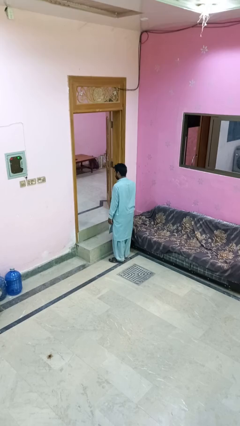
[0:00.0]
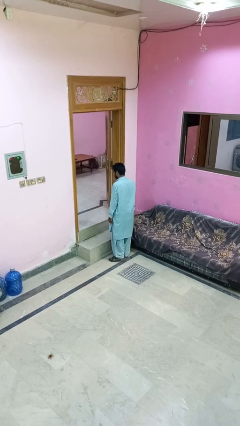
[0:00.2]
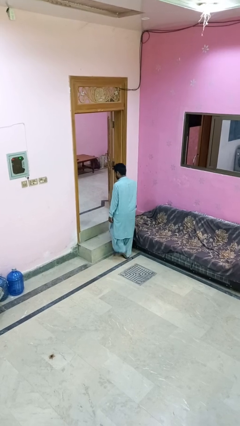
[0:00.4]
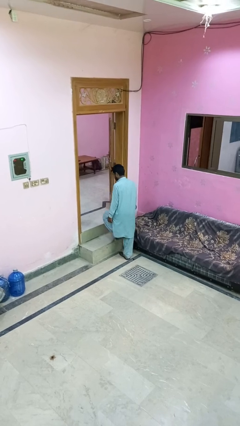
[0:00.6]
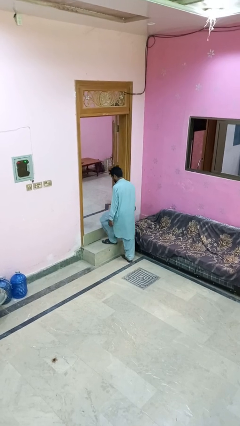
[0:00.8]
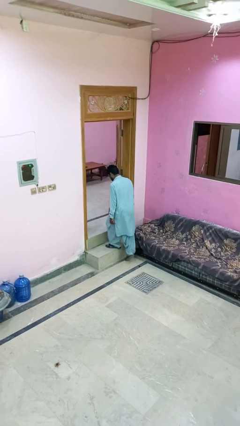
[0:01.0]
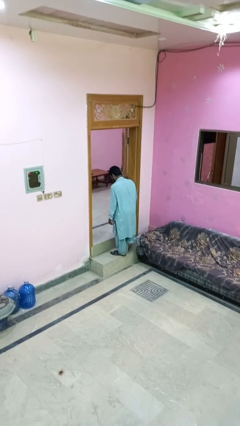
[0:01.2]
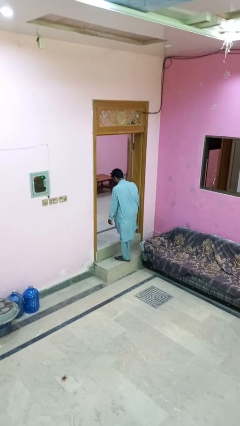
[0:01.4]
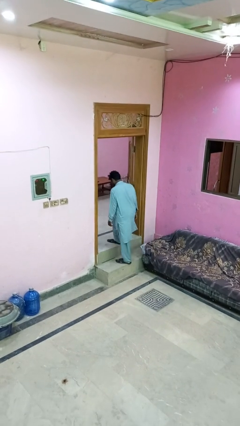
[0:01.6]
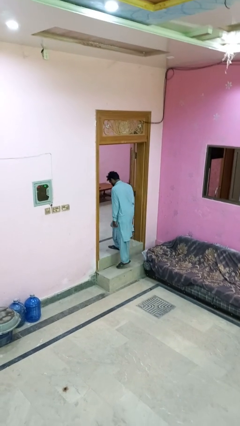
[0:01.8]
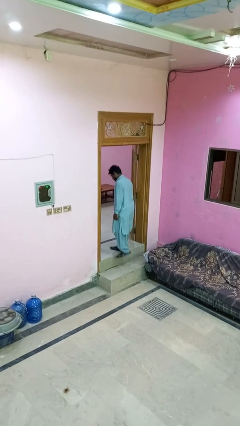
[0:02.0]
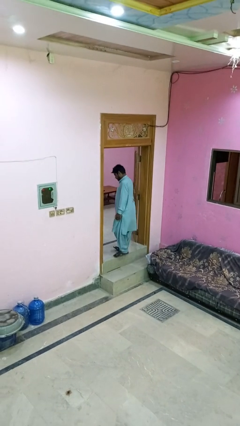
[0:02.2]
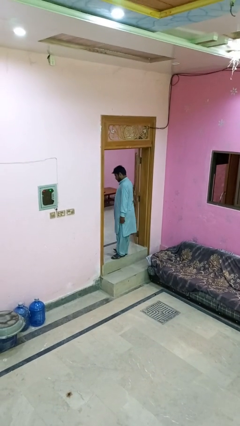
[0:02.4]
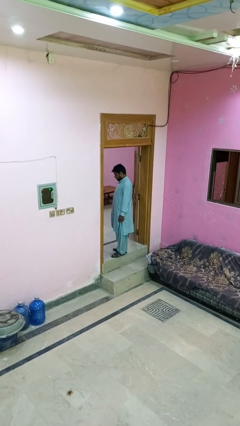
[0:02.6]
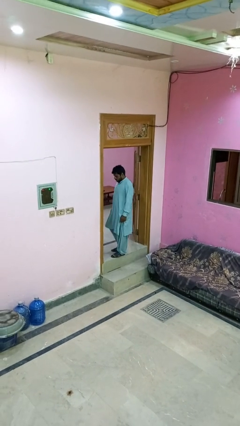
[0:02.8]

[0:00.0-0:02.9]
person climbs up stairs

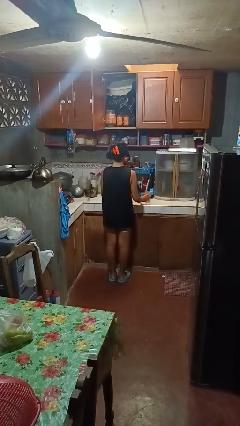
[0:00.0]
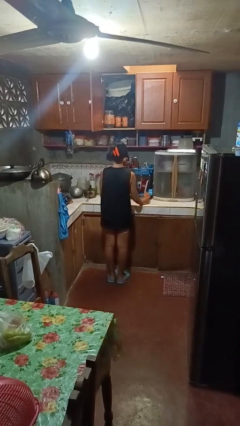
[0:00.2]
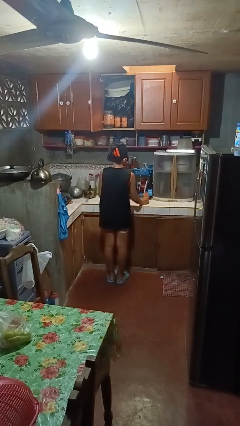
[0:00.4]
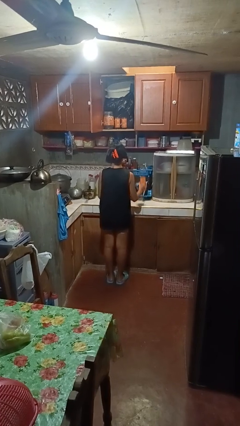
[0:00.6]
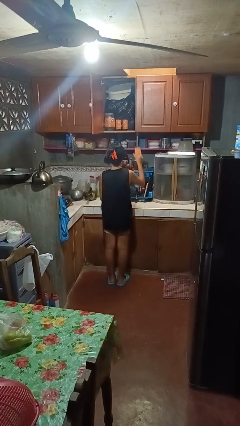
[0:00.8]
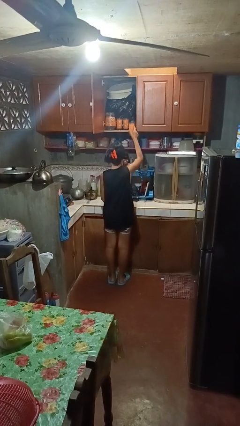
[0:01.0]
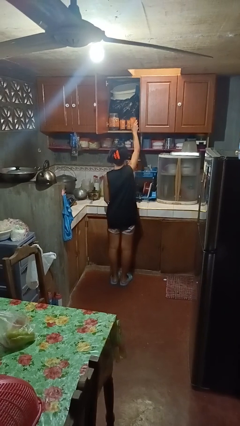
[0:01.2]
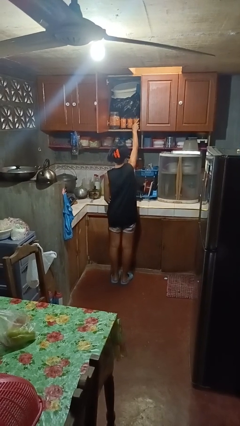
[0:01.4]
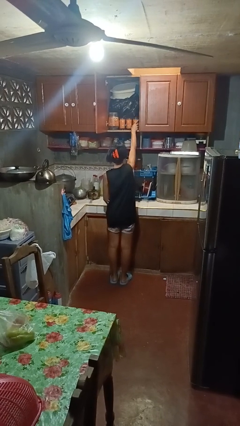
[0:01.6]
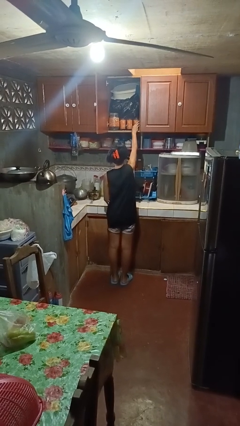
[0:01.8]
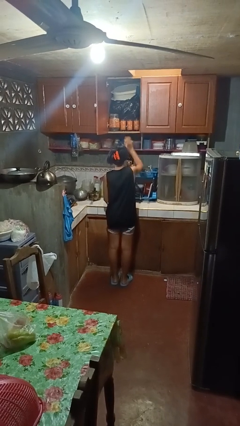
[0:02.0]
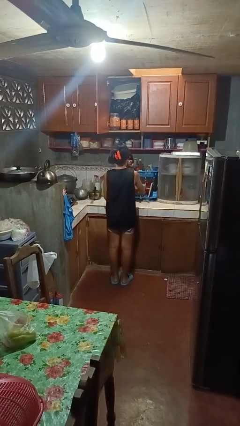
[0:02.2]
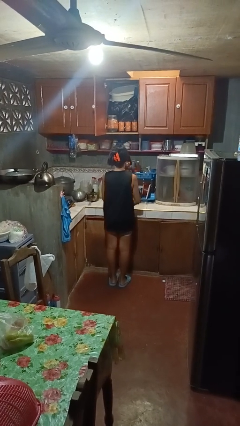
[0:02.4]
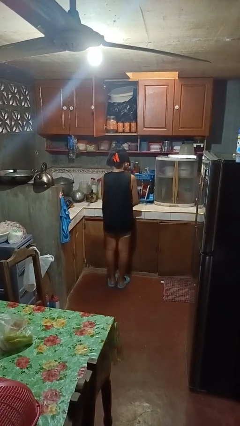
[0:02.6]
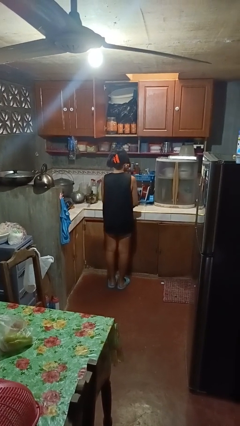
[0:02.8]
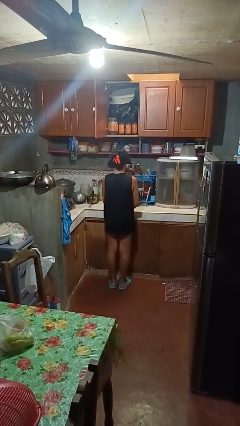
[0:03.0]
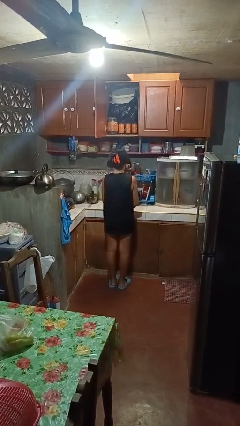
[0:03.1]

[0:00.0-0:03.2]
person puts object in cabinet

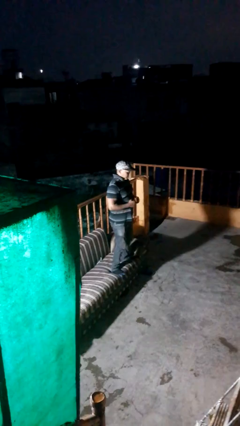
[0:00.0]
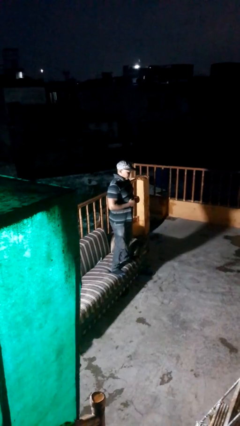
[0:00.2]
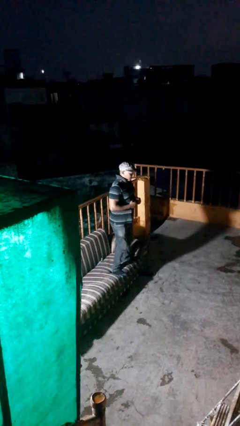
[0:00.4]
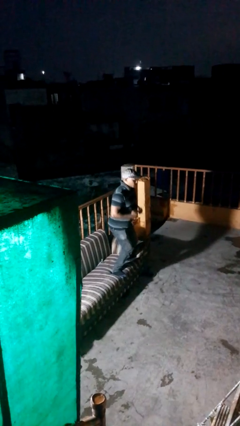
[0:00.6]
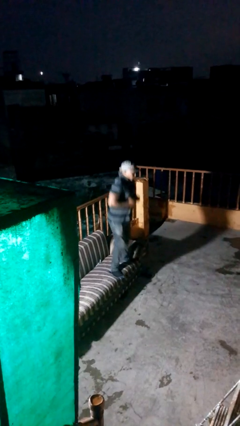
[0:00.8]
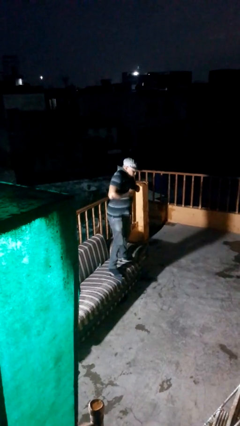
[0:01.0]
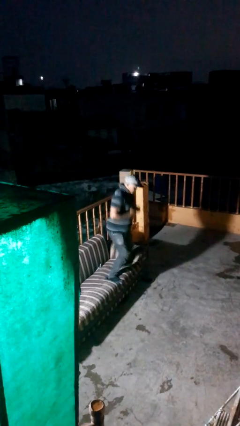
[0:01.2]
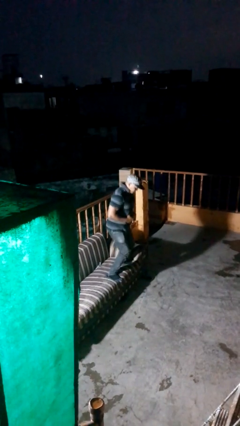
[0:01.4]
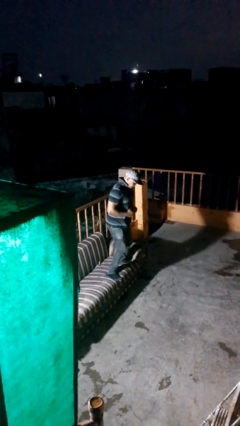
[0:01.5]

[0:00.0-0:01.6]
person jumps on couch

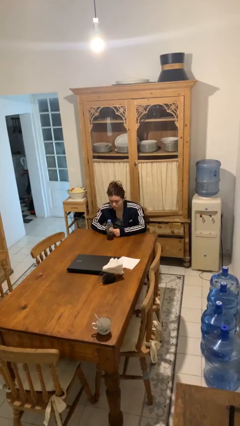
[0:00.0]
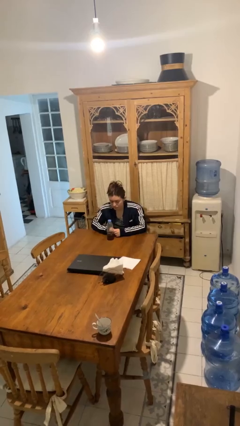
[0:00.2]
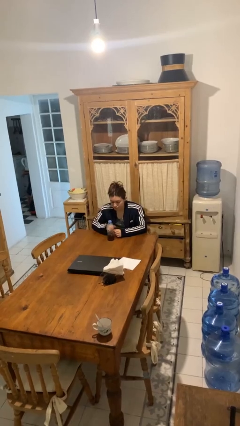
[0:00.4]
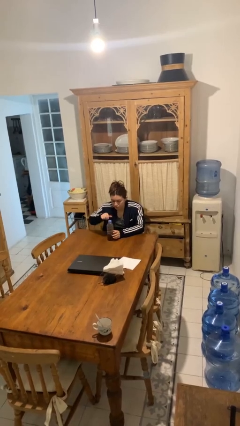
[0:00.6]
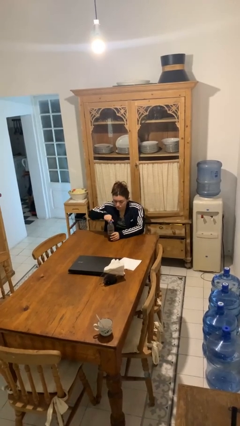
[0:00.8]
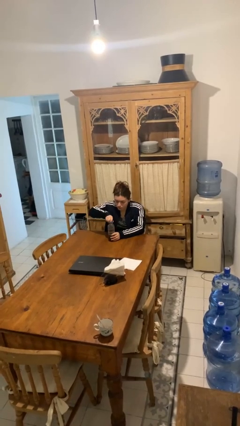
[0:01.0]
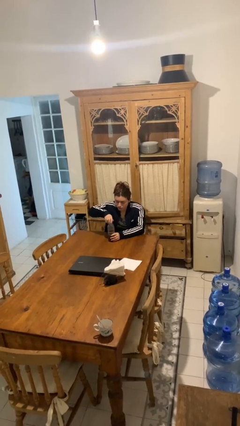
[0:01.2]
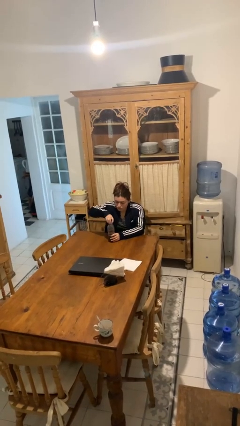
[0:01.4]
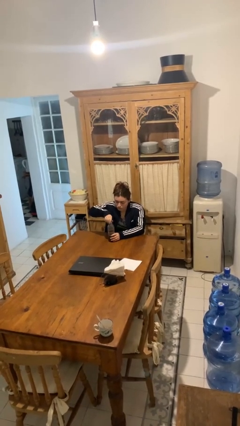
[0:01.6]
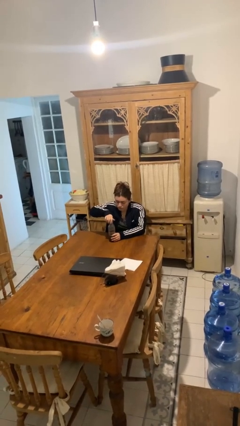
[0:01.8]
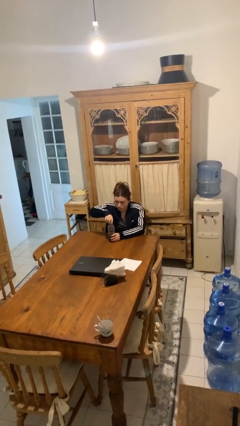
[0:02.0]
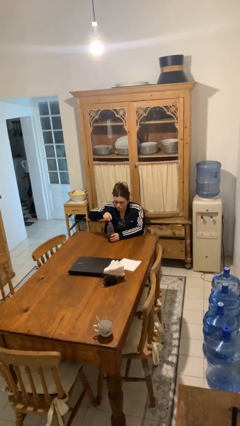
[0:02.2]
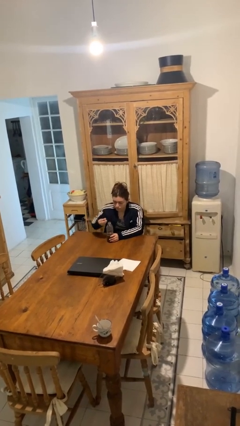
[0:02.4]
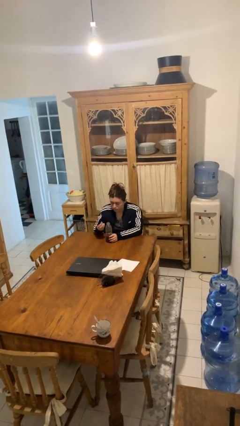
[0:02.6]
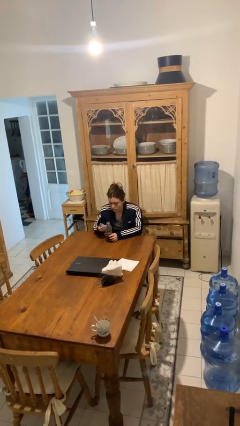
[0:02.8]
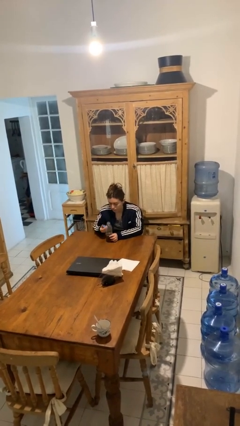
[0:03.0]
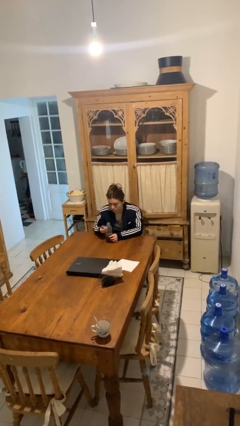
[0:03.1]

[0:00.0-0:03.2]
person unscrews lid from bottle

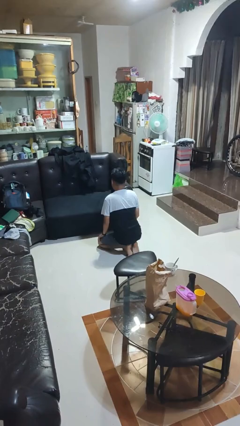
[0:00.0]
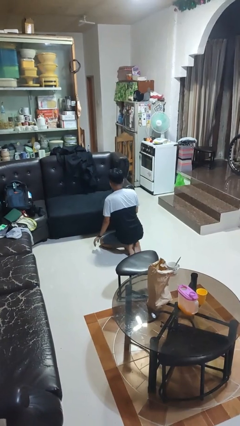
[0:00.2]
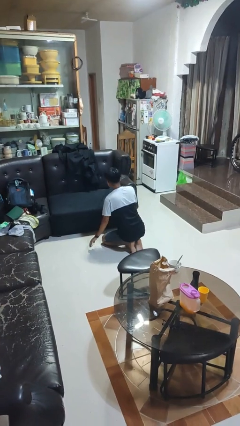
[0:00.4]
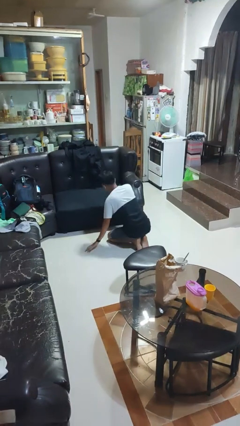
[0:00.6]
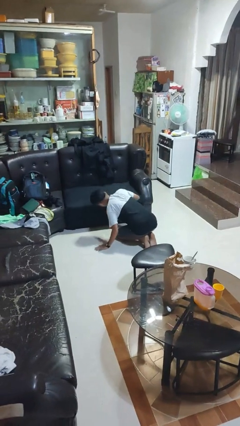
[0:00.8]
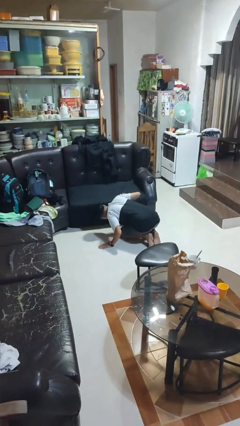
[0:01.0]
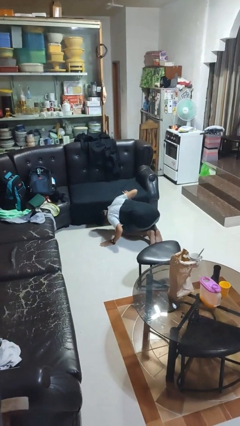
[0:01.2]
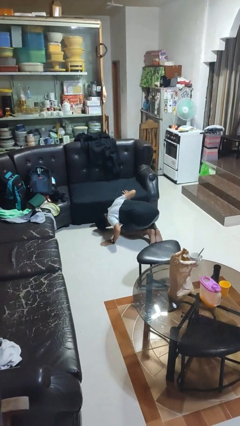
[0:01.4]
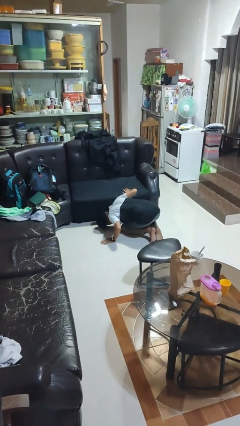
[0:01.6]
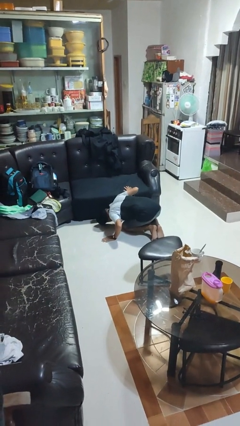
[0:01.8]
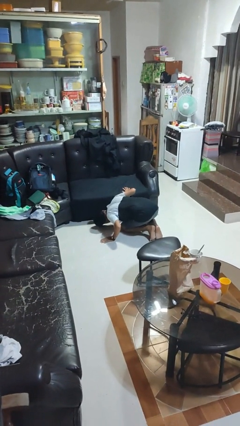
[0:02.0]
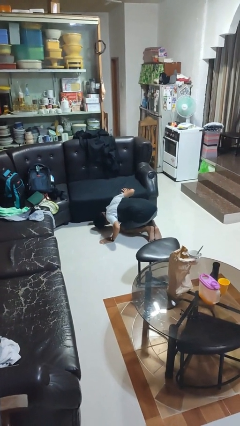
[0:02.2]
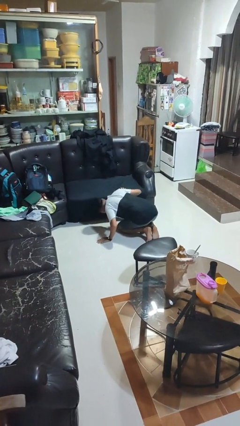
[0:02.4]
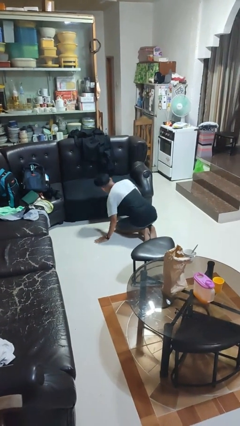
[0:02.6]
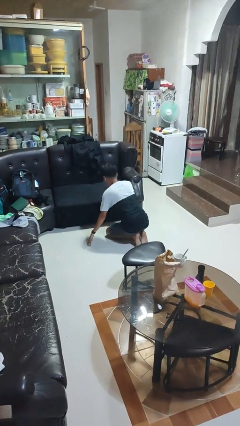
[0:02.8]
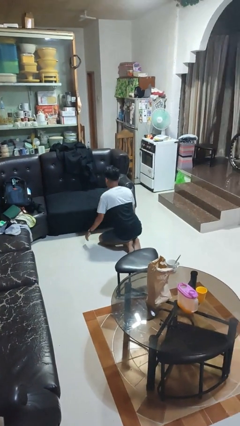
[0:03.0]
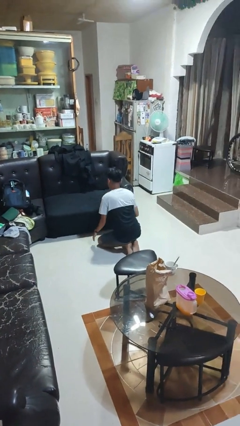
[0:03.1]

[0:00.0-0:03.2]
person searches under couch

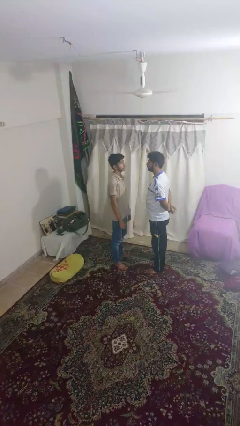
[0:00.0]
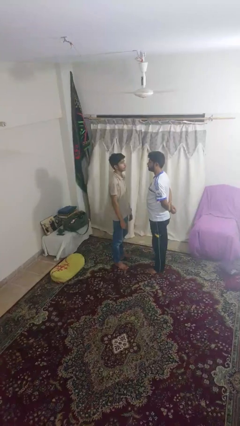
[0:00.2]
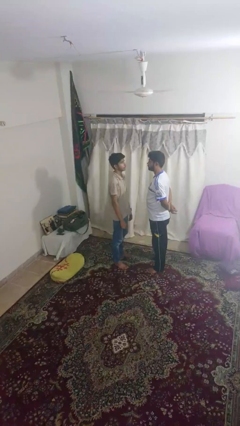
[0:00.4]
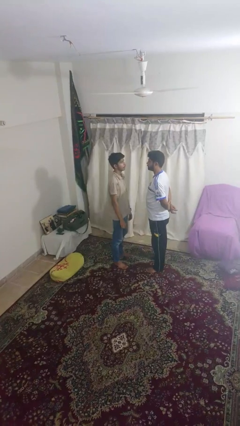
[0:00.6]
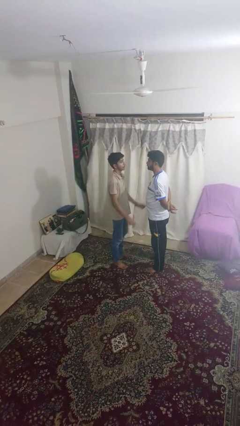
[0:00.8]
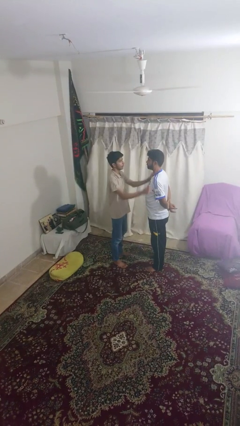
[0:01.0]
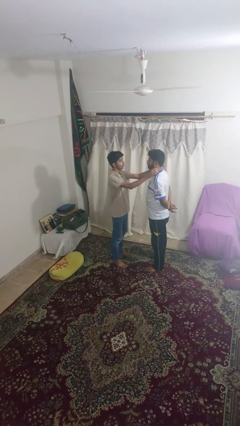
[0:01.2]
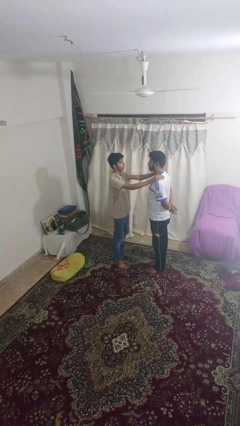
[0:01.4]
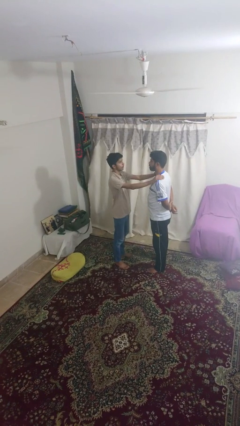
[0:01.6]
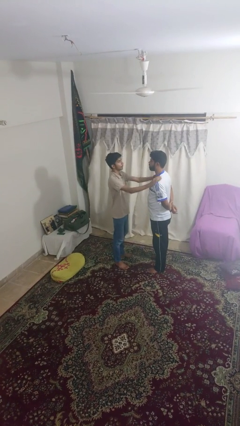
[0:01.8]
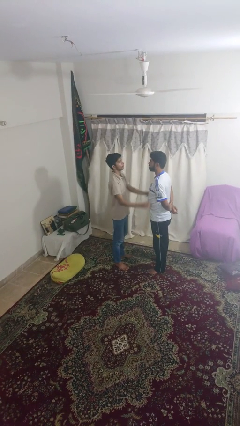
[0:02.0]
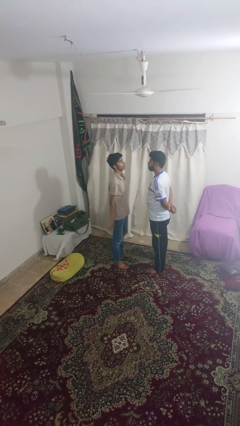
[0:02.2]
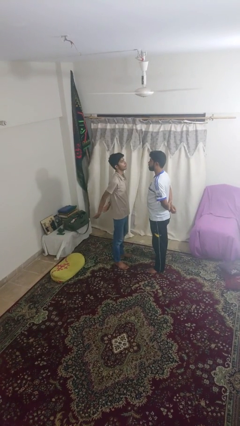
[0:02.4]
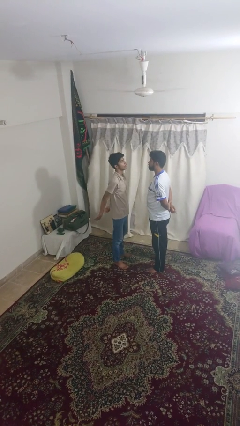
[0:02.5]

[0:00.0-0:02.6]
person pounds shoulders of person

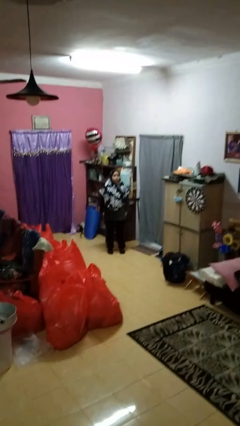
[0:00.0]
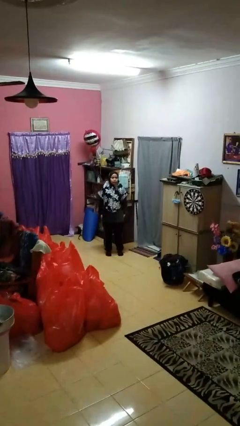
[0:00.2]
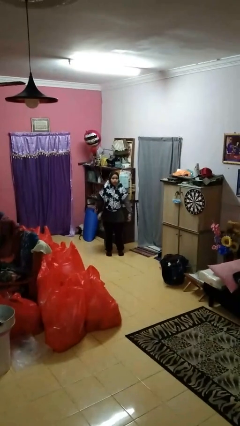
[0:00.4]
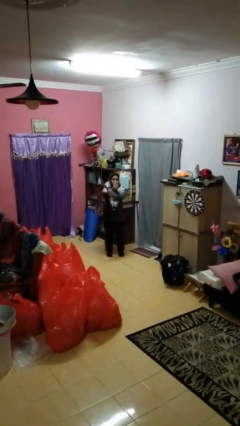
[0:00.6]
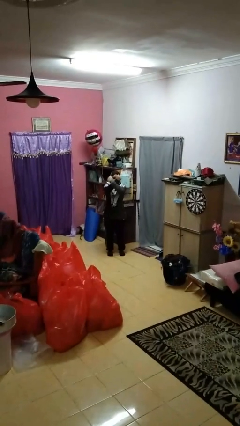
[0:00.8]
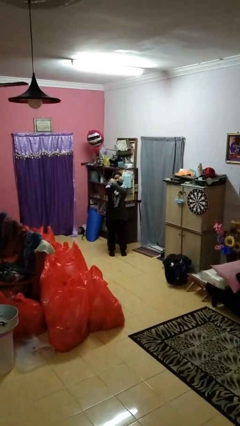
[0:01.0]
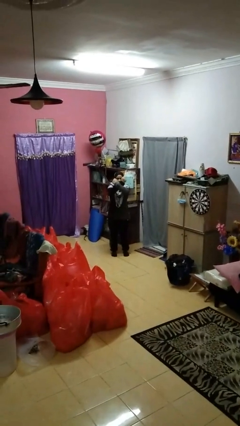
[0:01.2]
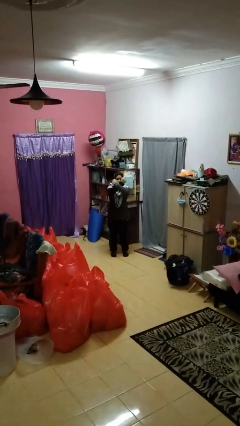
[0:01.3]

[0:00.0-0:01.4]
person crosses arms
